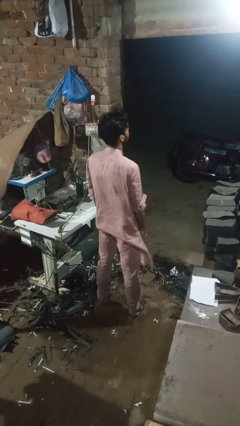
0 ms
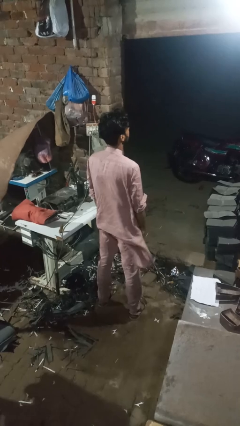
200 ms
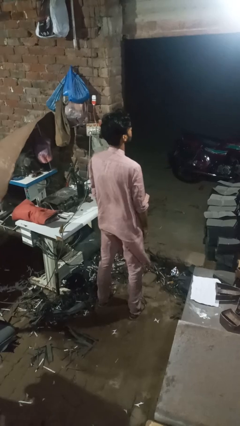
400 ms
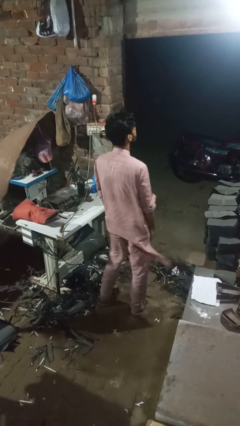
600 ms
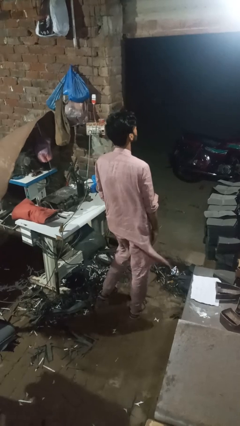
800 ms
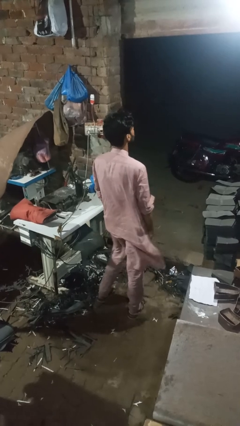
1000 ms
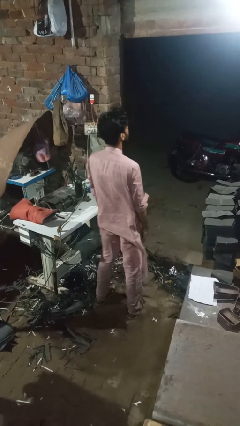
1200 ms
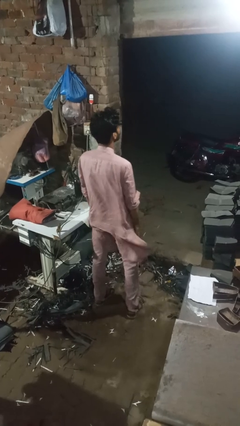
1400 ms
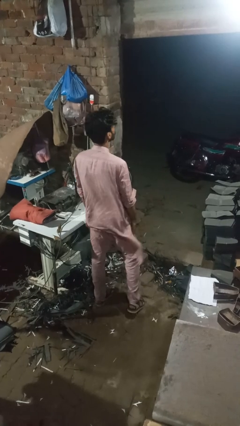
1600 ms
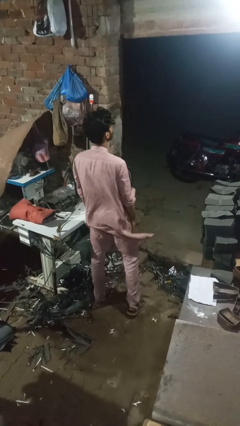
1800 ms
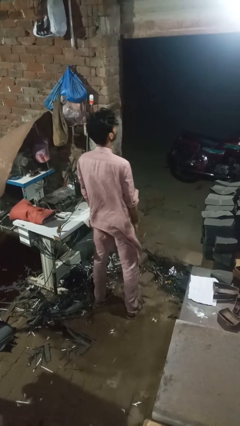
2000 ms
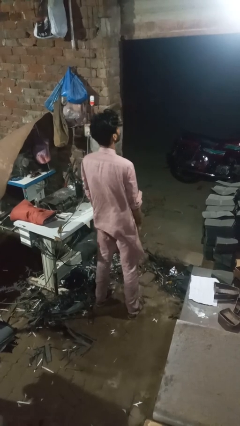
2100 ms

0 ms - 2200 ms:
person wiggles hips

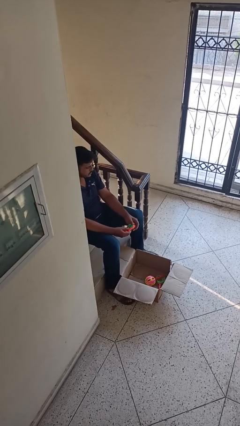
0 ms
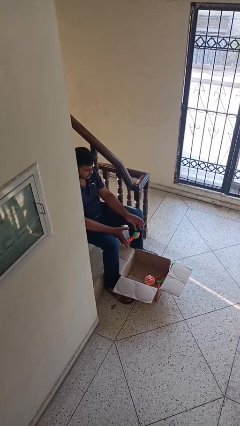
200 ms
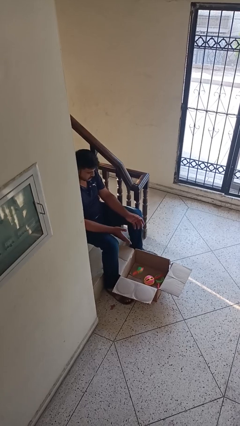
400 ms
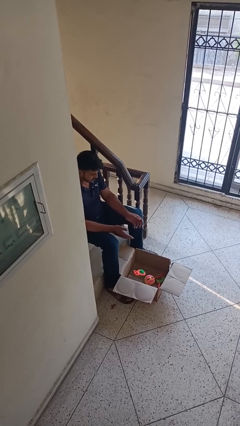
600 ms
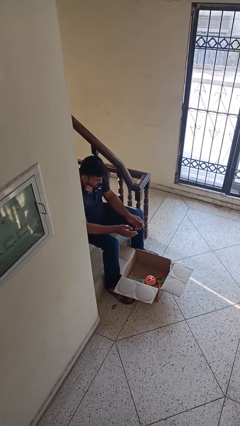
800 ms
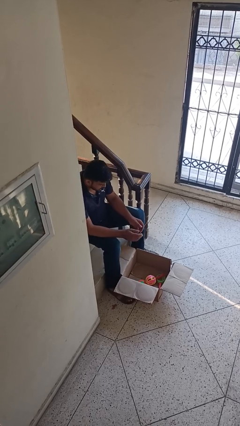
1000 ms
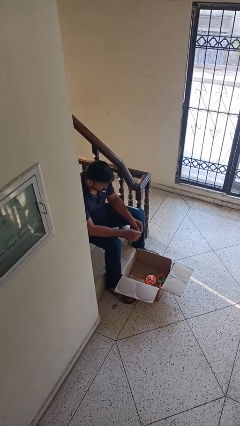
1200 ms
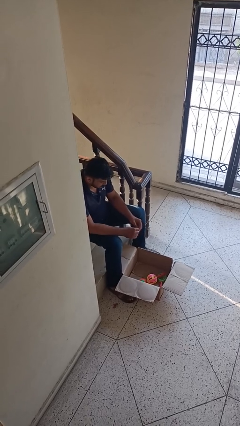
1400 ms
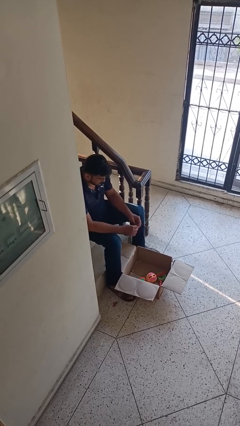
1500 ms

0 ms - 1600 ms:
person puts object into box

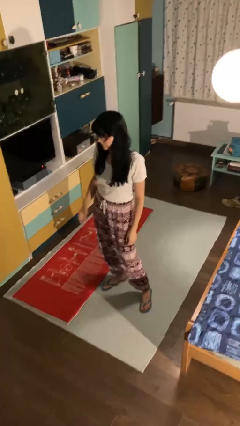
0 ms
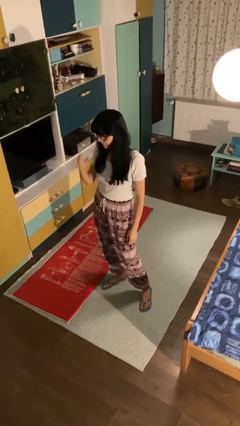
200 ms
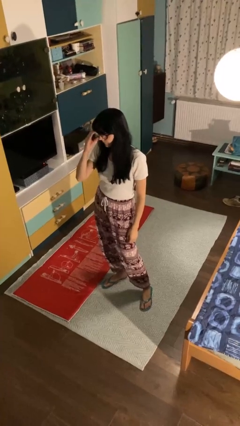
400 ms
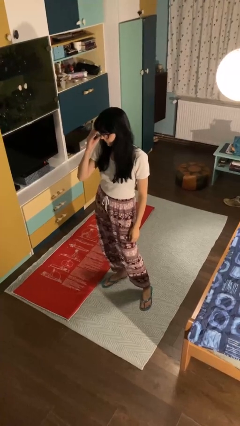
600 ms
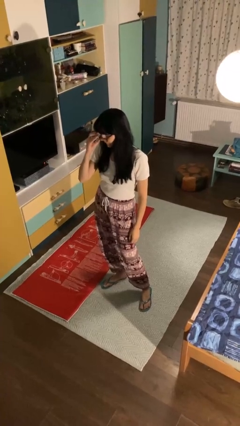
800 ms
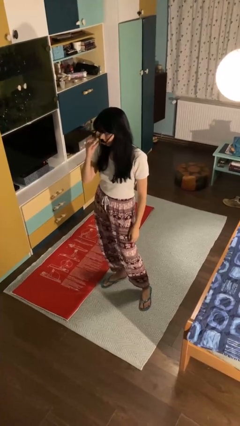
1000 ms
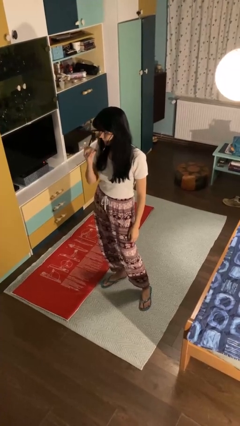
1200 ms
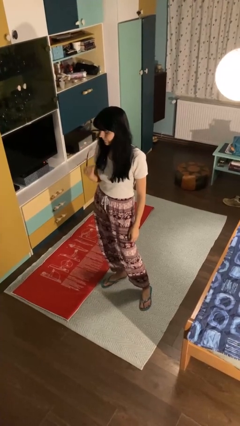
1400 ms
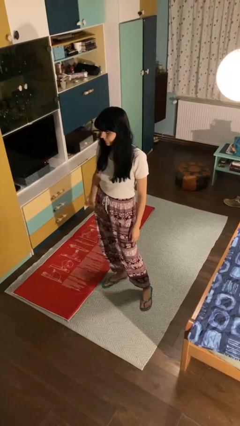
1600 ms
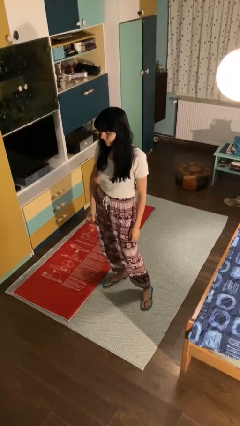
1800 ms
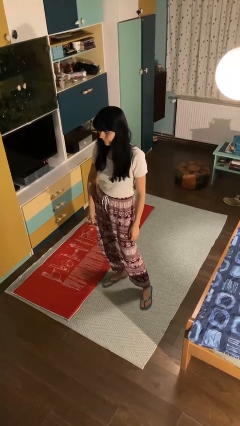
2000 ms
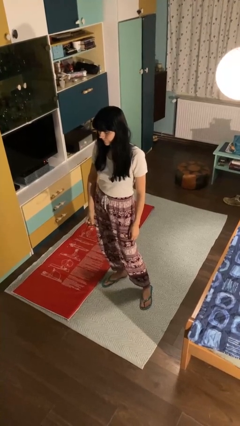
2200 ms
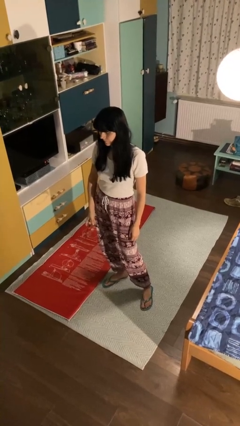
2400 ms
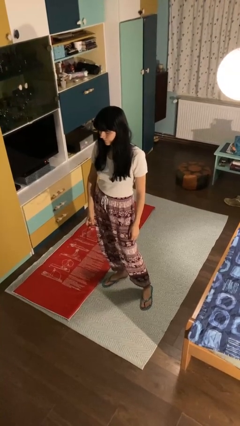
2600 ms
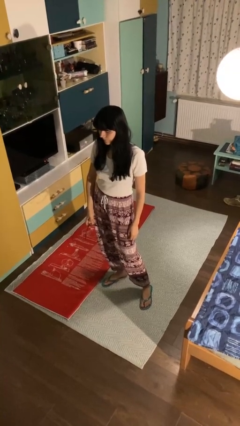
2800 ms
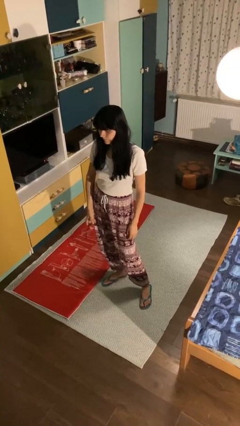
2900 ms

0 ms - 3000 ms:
person takes off glasses

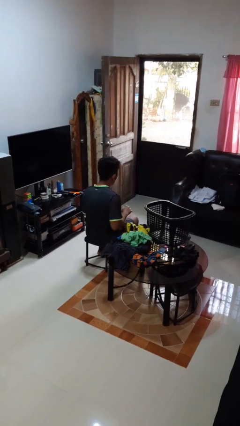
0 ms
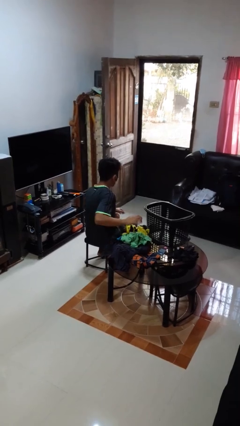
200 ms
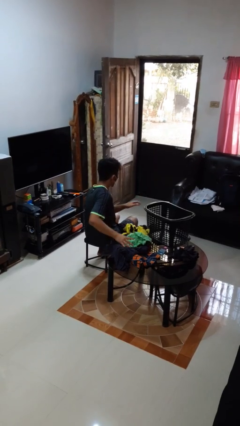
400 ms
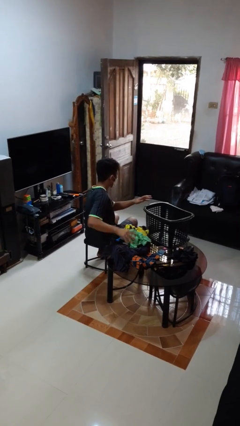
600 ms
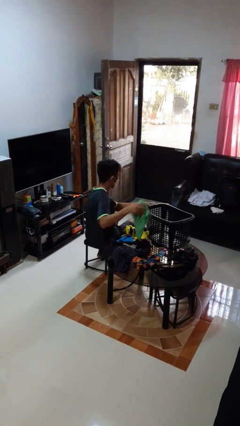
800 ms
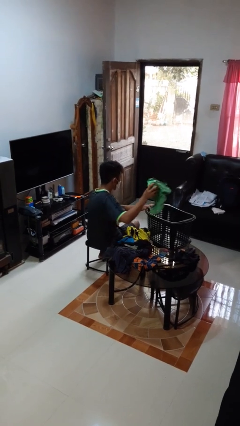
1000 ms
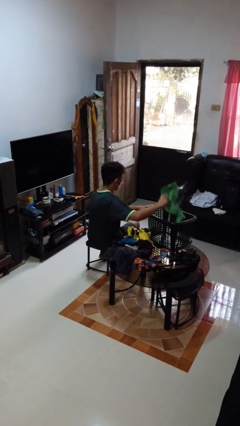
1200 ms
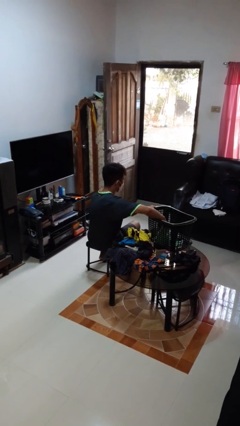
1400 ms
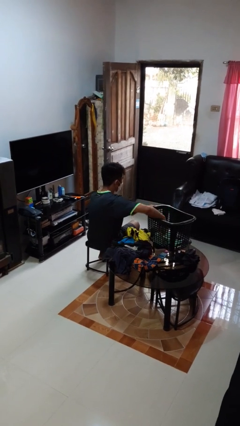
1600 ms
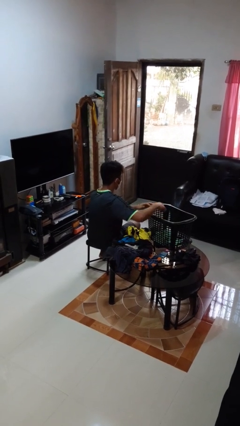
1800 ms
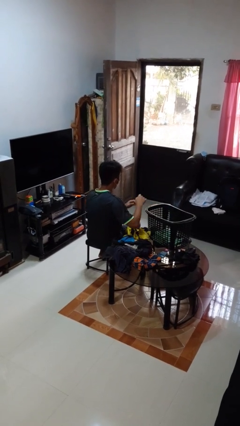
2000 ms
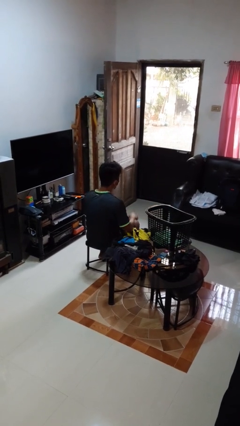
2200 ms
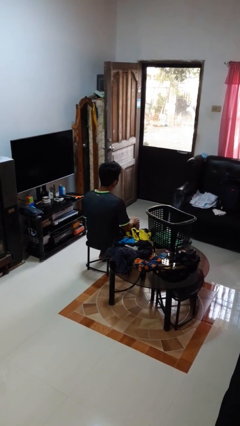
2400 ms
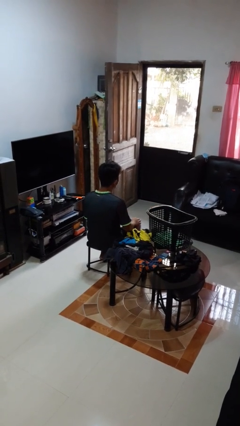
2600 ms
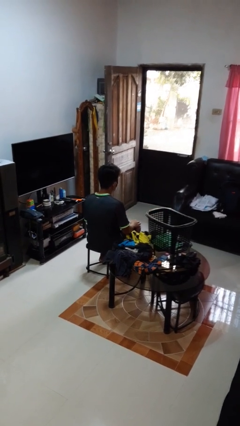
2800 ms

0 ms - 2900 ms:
person puts object into basket

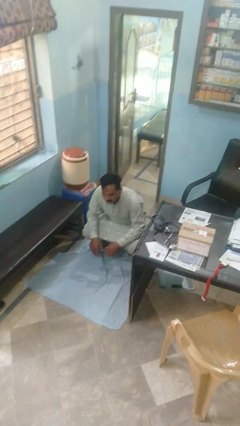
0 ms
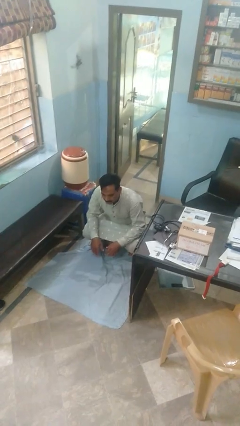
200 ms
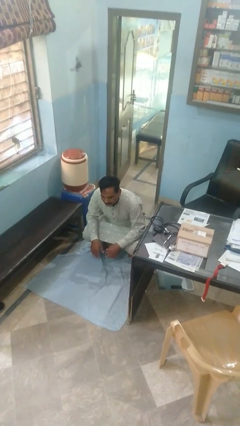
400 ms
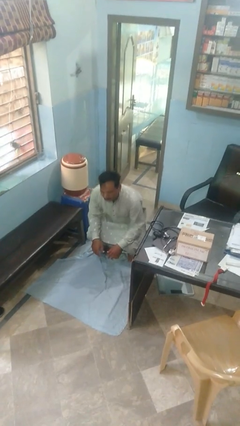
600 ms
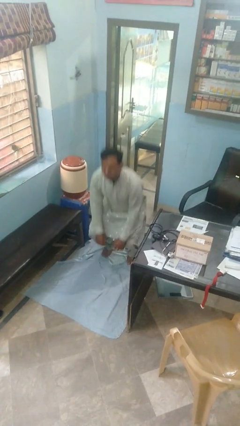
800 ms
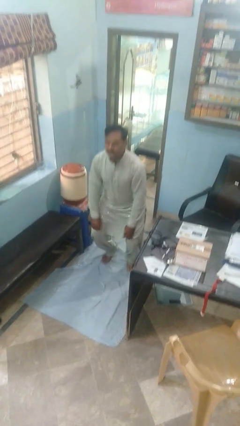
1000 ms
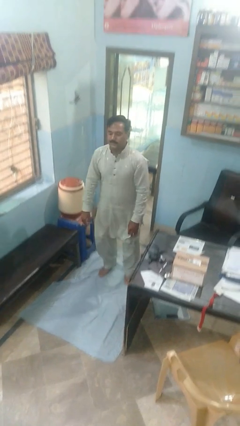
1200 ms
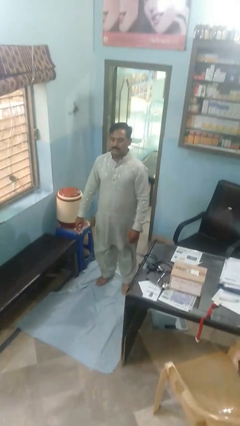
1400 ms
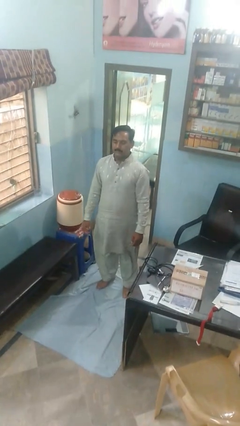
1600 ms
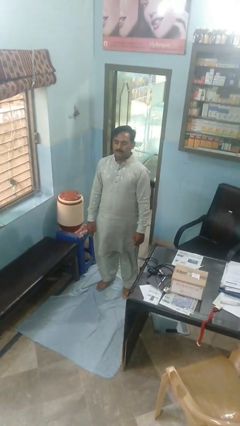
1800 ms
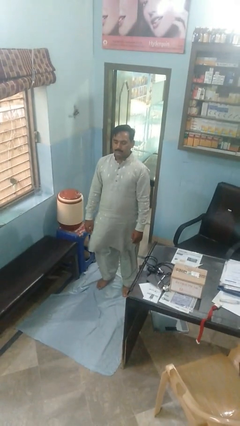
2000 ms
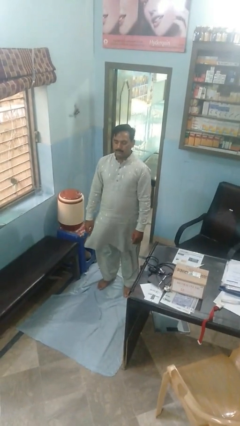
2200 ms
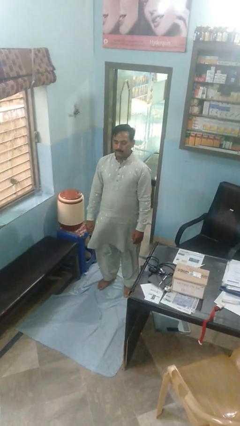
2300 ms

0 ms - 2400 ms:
person stands up

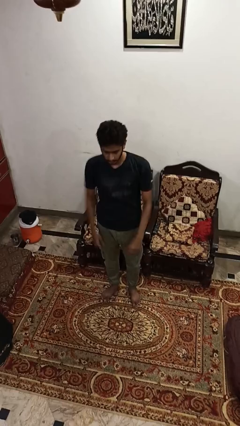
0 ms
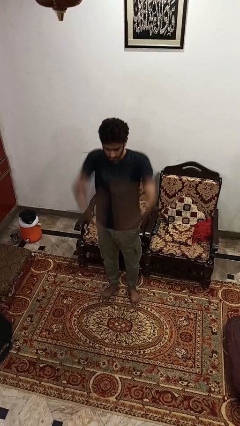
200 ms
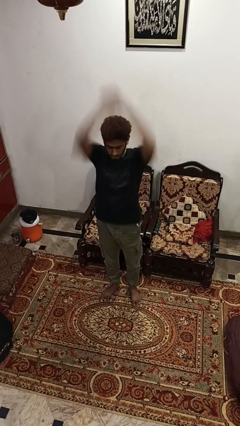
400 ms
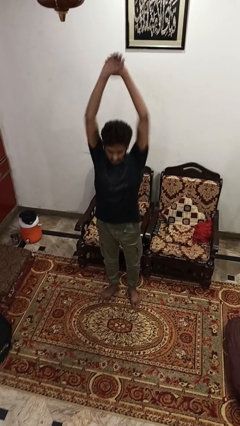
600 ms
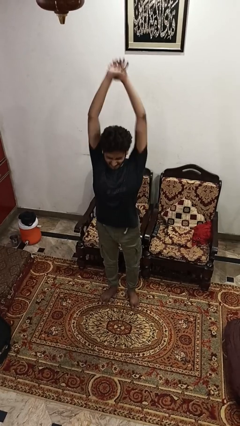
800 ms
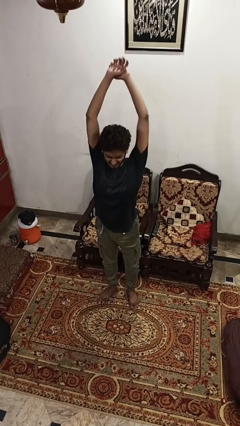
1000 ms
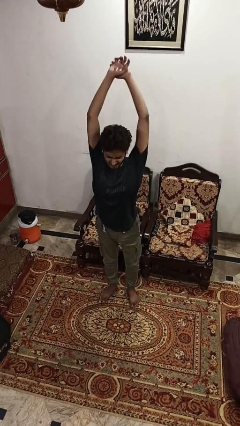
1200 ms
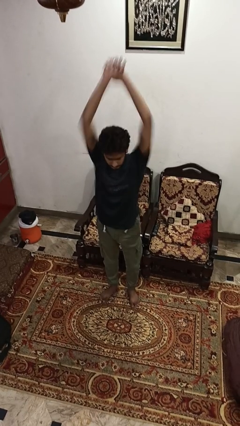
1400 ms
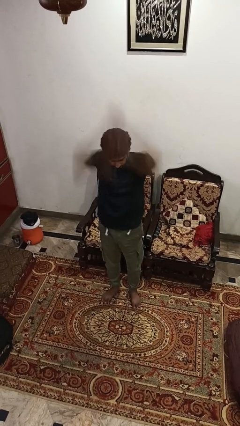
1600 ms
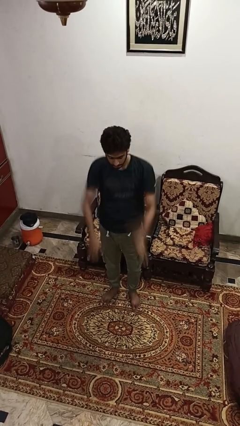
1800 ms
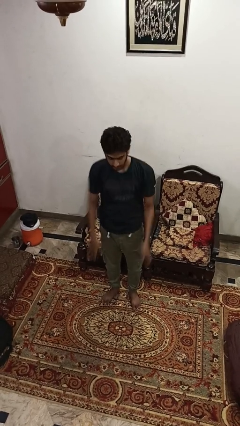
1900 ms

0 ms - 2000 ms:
person stretches arms over head

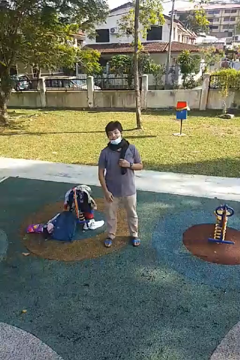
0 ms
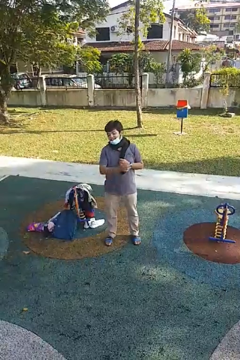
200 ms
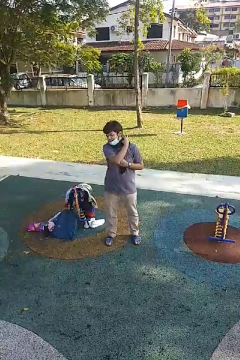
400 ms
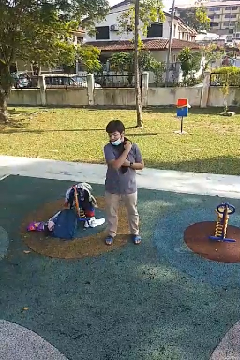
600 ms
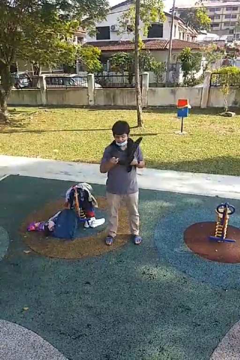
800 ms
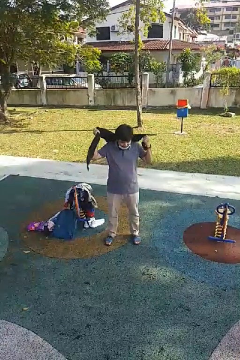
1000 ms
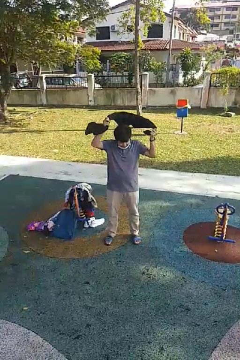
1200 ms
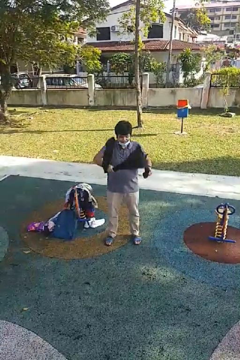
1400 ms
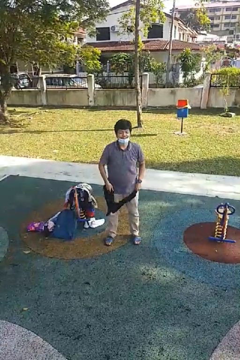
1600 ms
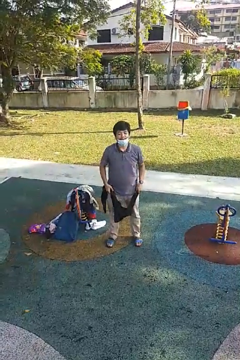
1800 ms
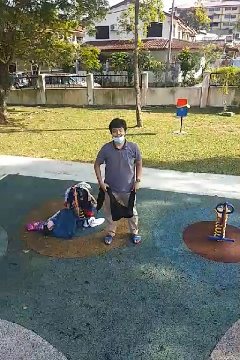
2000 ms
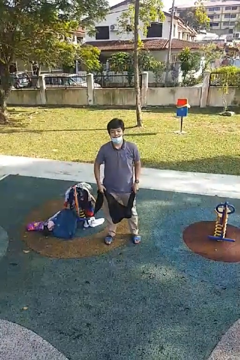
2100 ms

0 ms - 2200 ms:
person takes off scarf

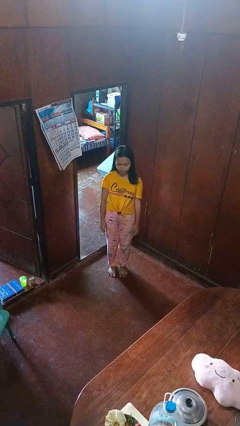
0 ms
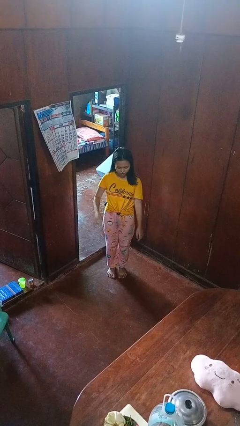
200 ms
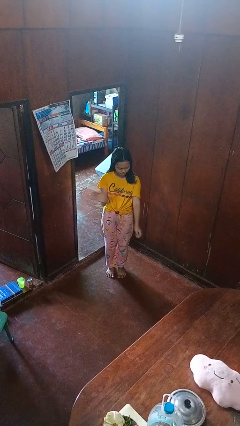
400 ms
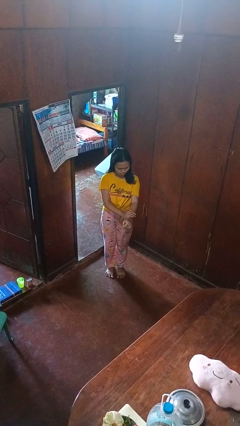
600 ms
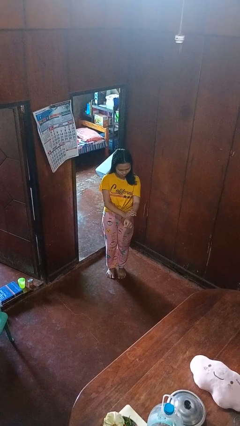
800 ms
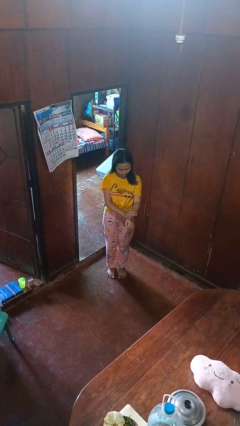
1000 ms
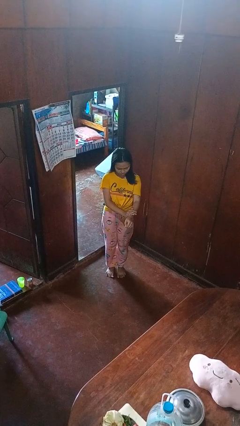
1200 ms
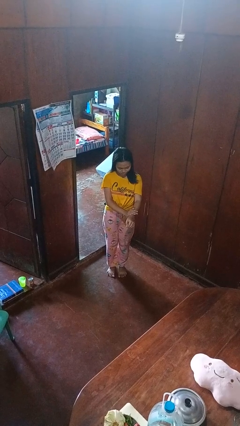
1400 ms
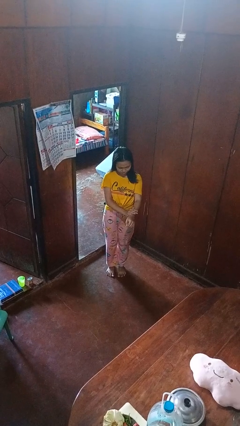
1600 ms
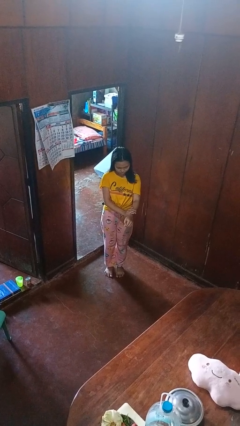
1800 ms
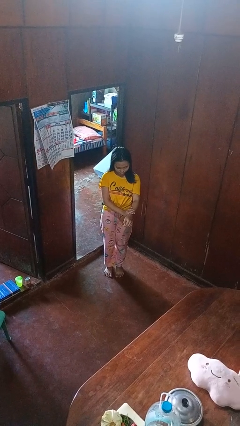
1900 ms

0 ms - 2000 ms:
person swats bug
